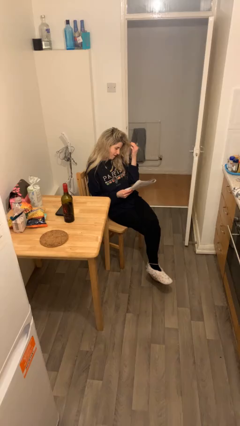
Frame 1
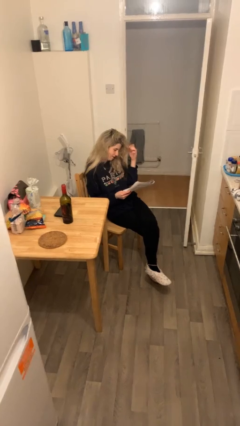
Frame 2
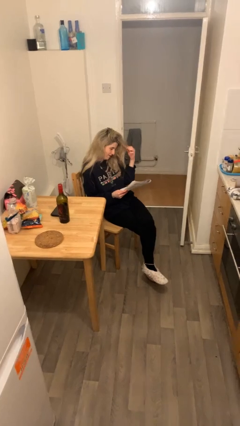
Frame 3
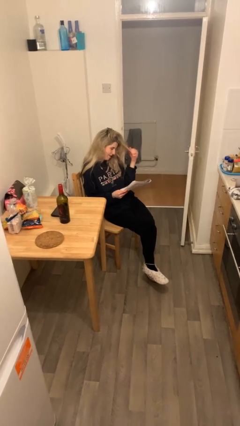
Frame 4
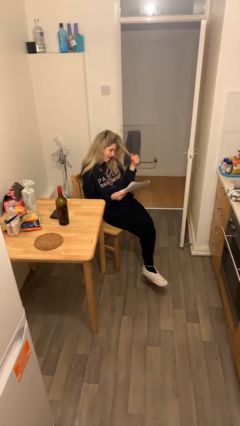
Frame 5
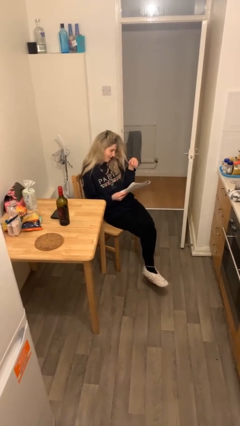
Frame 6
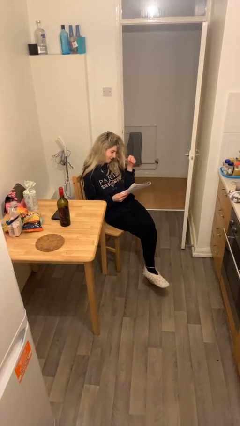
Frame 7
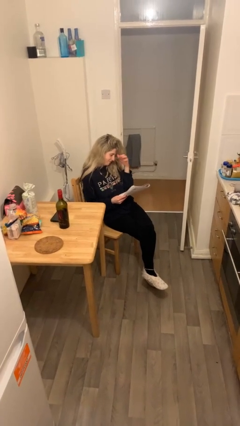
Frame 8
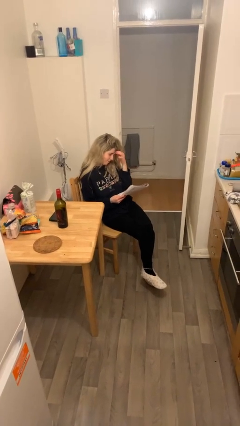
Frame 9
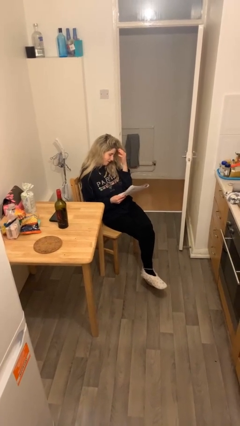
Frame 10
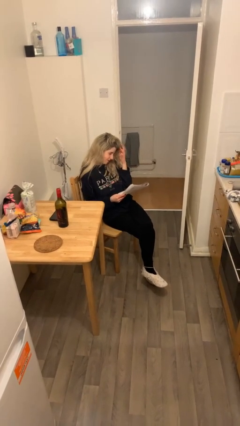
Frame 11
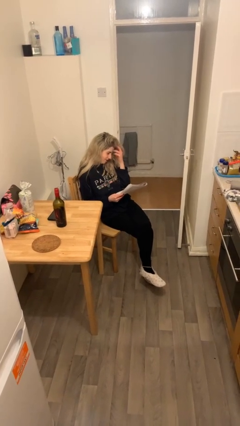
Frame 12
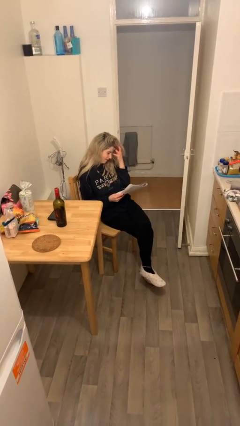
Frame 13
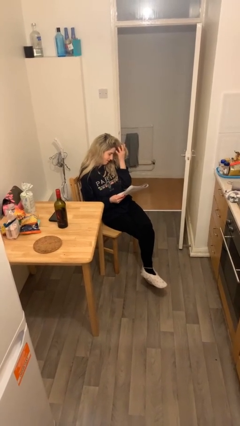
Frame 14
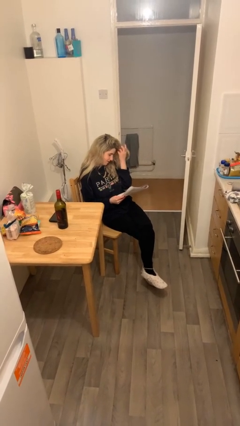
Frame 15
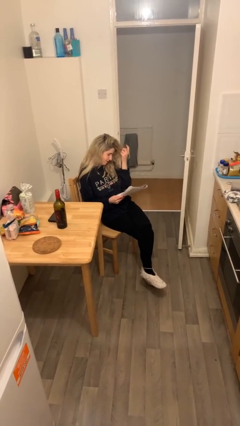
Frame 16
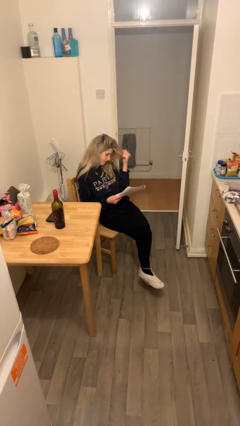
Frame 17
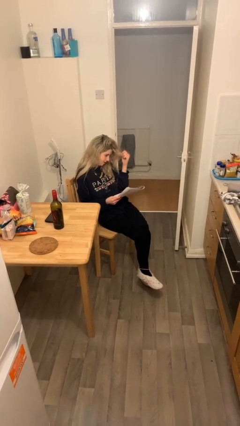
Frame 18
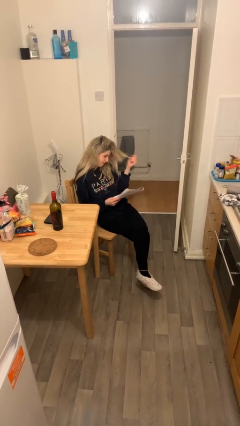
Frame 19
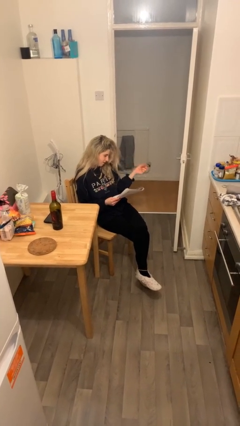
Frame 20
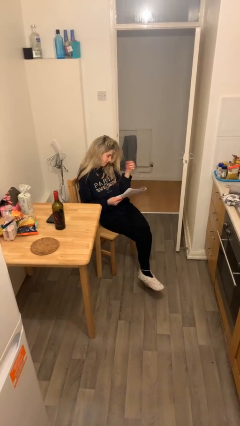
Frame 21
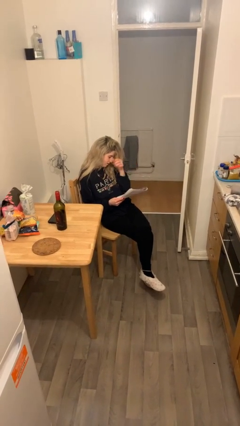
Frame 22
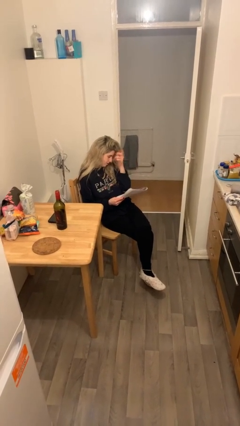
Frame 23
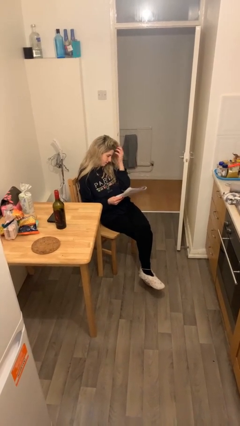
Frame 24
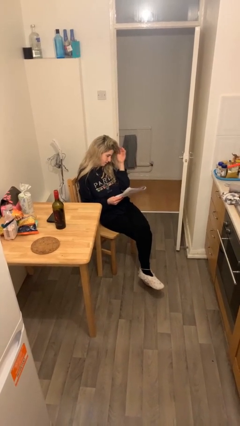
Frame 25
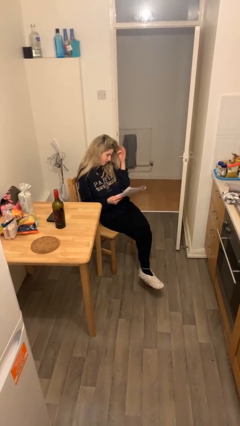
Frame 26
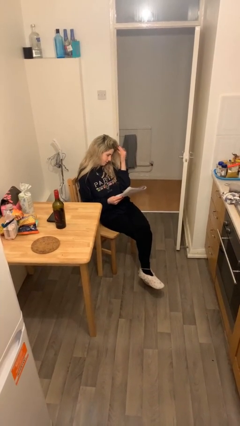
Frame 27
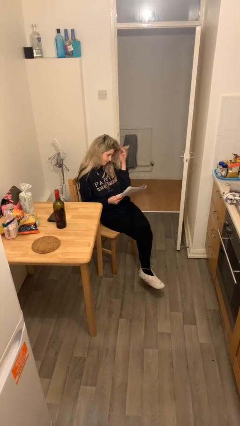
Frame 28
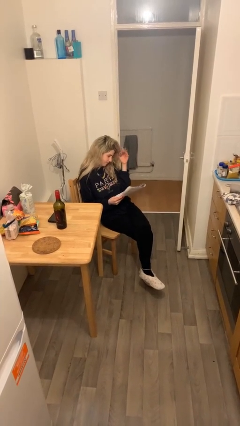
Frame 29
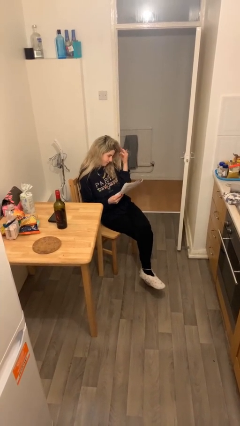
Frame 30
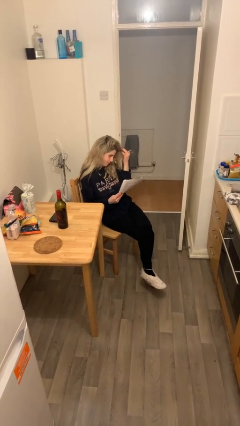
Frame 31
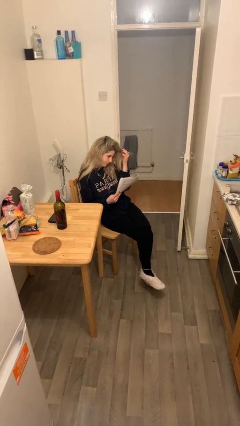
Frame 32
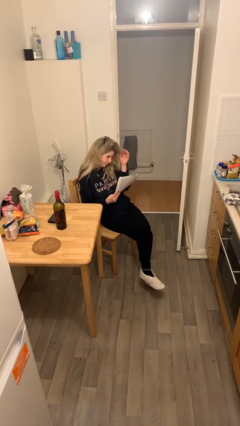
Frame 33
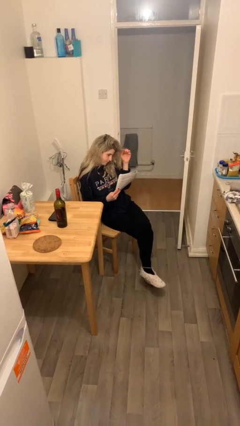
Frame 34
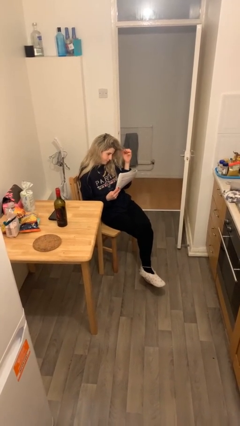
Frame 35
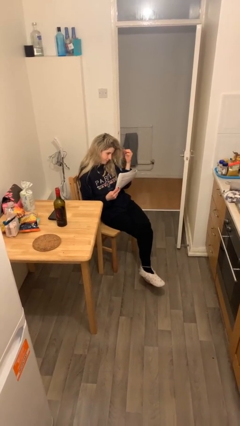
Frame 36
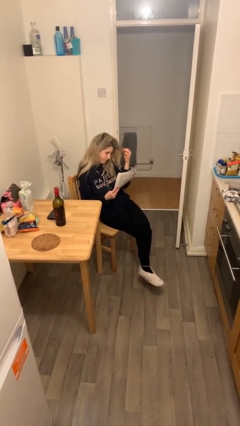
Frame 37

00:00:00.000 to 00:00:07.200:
person reads document

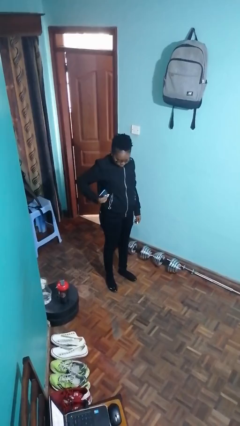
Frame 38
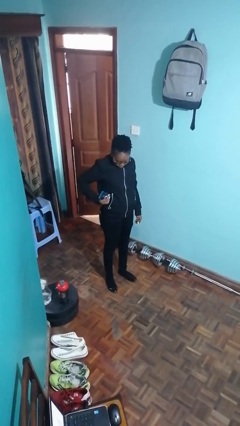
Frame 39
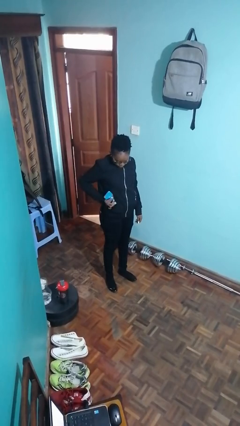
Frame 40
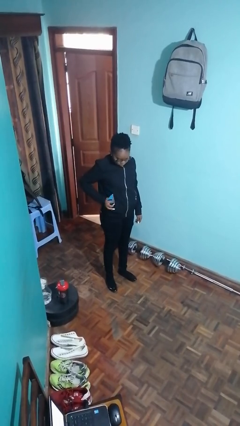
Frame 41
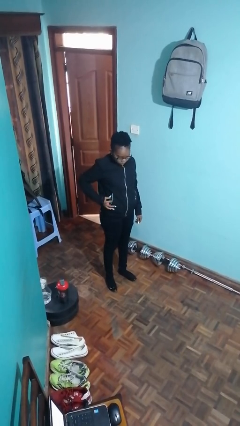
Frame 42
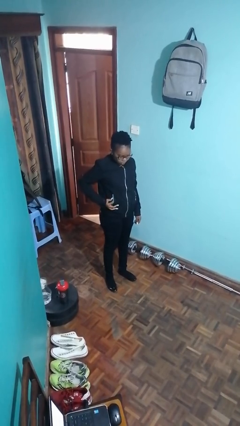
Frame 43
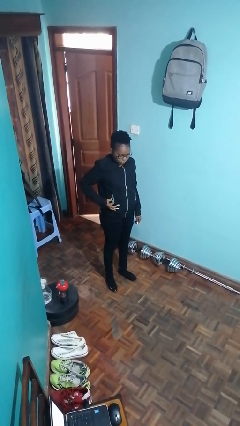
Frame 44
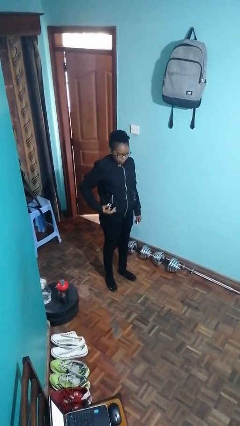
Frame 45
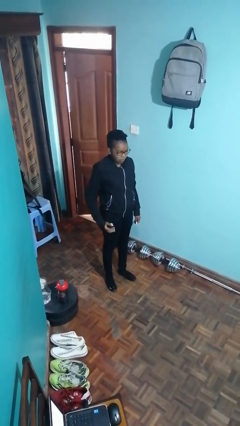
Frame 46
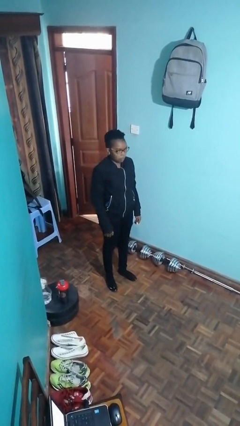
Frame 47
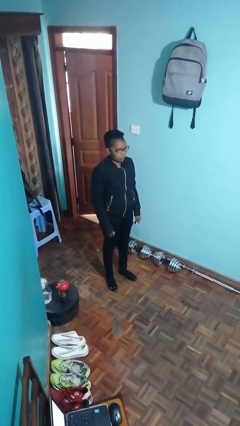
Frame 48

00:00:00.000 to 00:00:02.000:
person puts phone into pocket

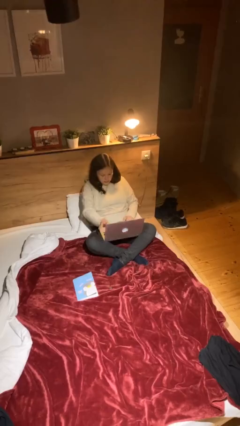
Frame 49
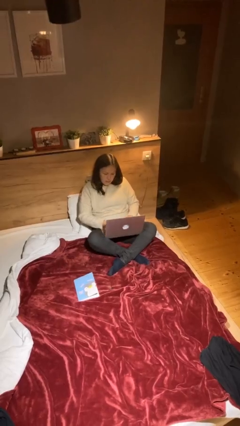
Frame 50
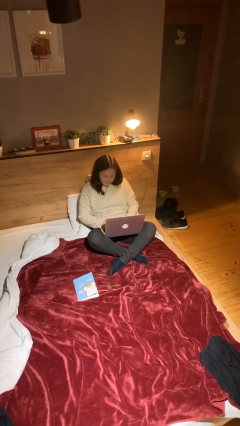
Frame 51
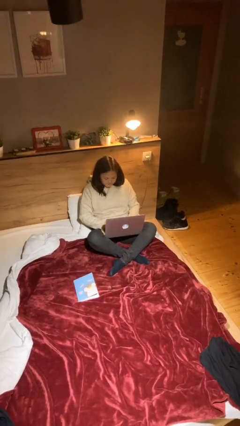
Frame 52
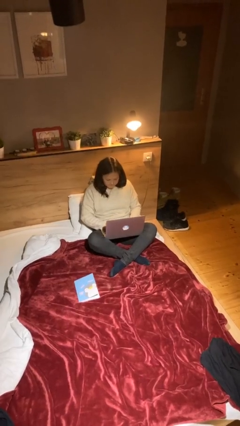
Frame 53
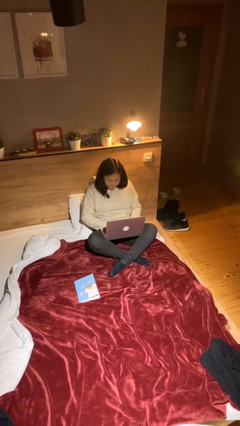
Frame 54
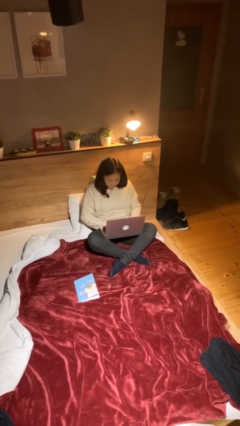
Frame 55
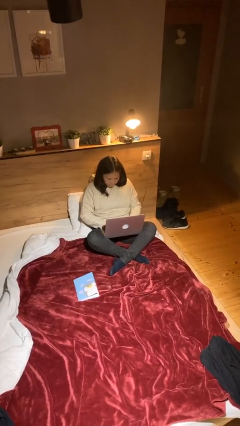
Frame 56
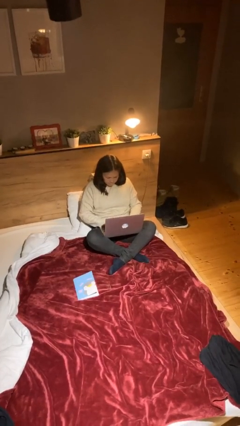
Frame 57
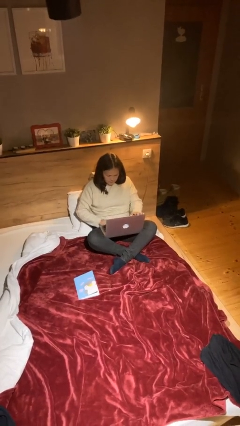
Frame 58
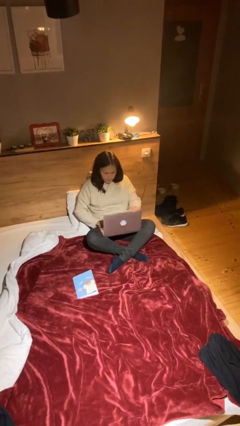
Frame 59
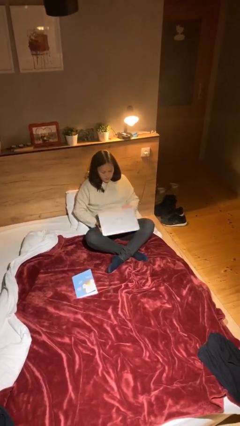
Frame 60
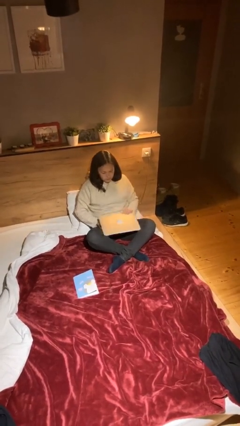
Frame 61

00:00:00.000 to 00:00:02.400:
person interacts with laptop

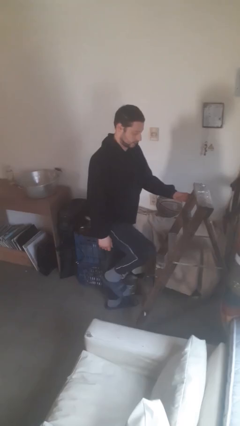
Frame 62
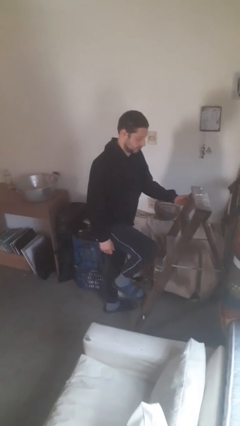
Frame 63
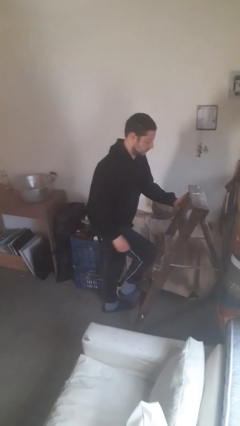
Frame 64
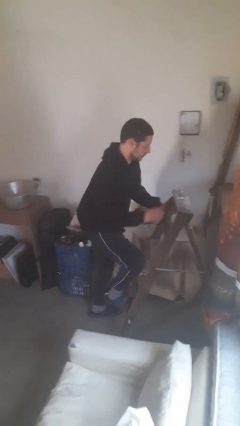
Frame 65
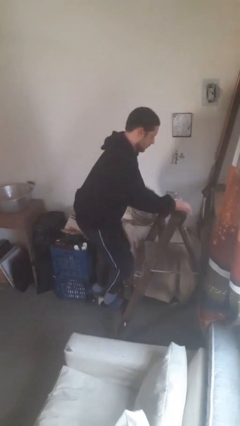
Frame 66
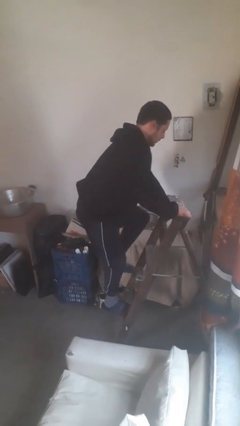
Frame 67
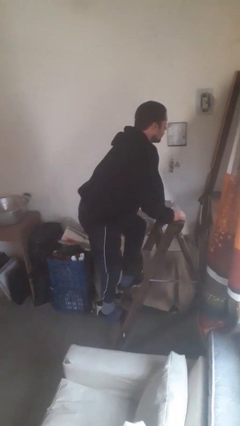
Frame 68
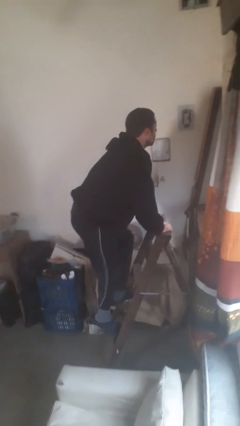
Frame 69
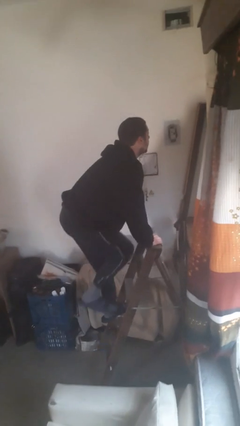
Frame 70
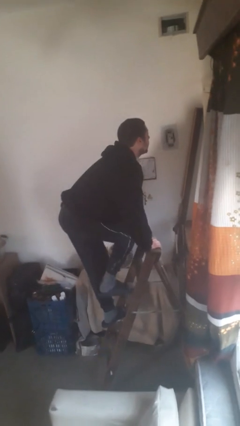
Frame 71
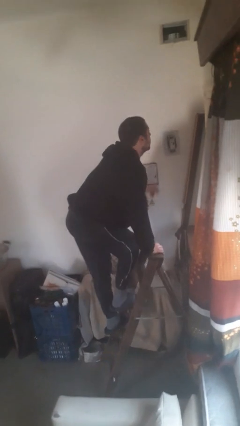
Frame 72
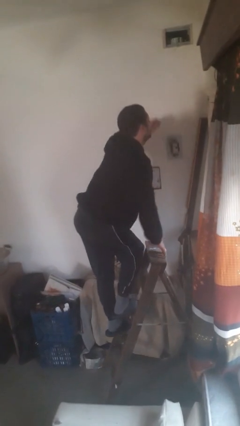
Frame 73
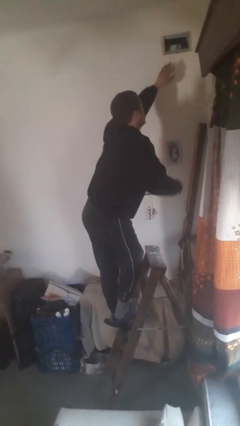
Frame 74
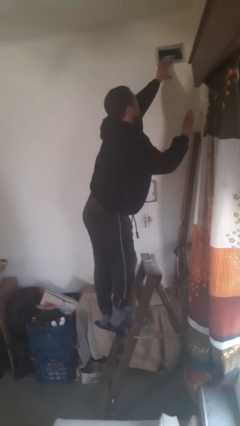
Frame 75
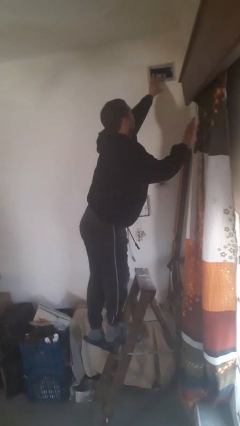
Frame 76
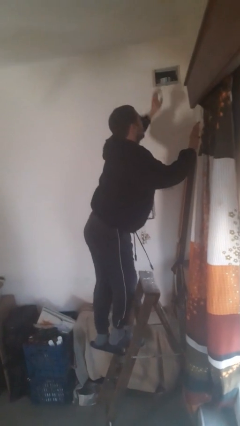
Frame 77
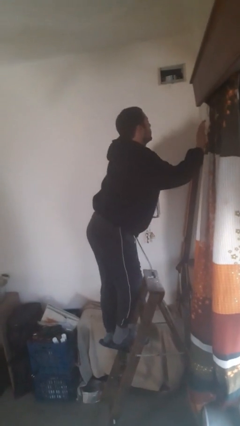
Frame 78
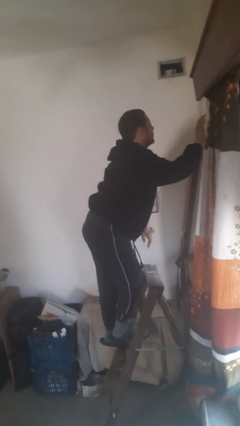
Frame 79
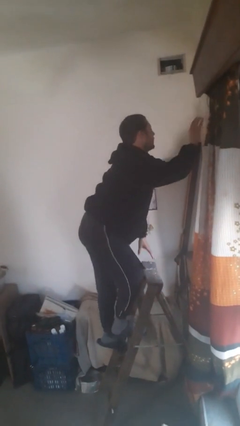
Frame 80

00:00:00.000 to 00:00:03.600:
person climbs up ladder

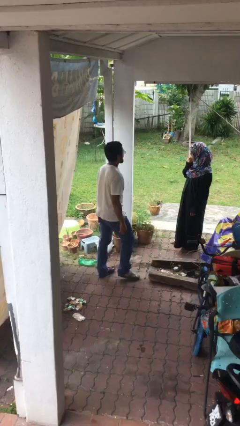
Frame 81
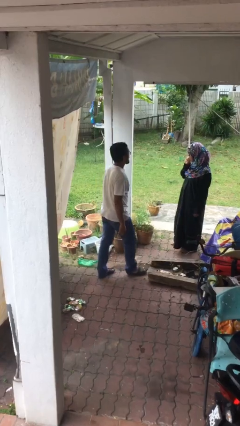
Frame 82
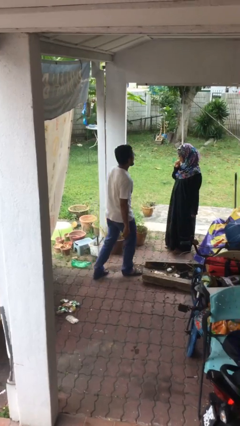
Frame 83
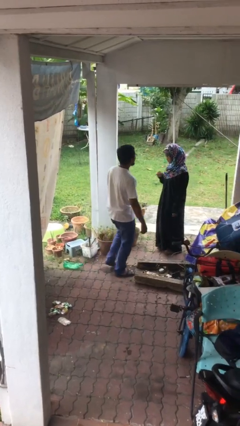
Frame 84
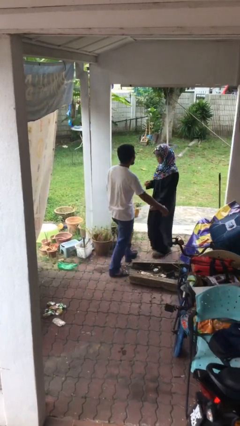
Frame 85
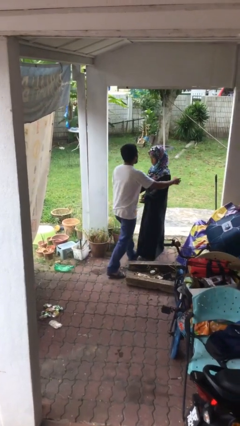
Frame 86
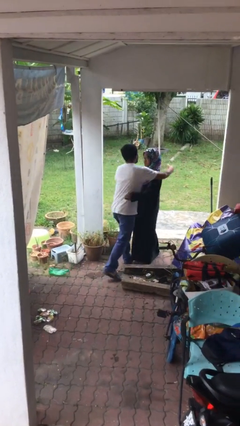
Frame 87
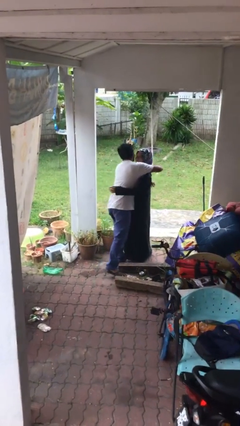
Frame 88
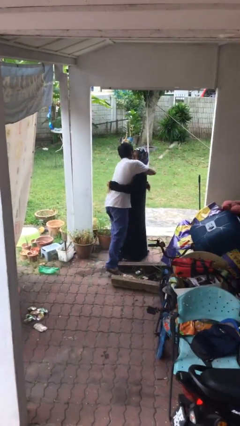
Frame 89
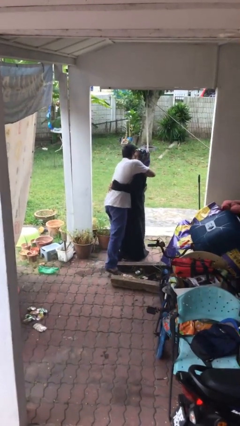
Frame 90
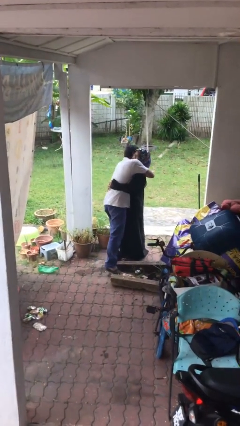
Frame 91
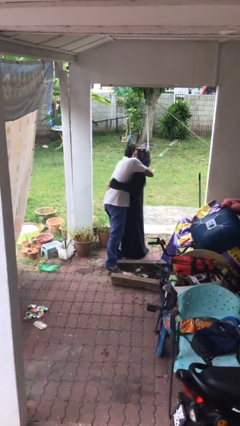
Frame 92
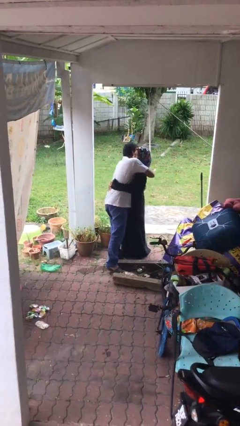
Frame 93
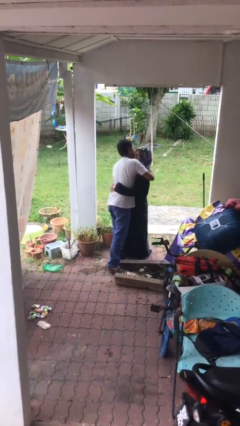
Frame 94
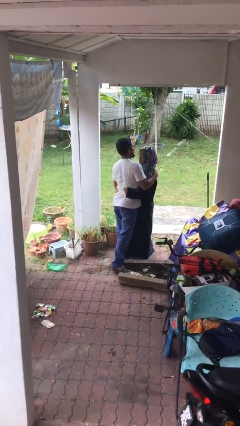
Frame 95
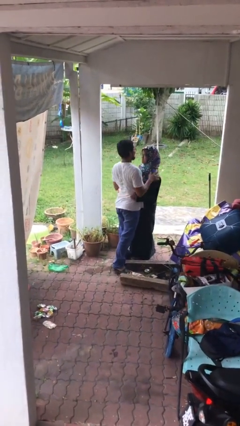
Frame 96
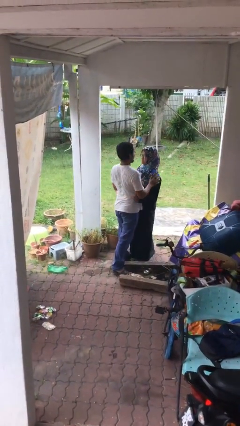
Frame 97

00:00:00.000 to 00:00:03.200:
person embraces person
